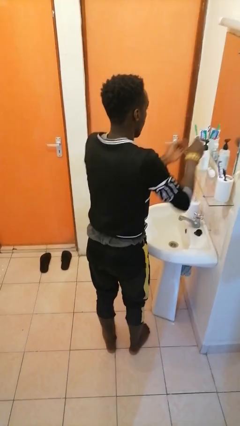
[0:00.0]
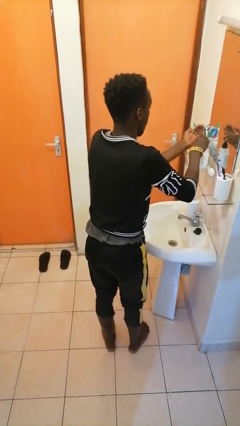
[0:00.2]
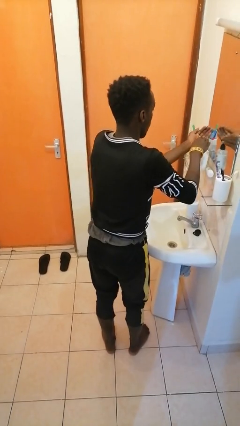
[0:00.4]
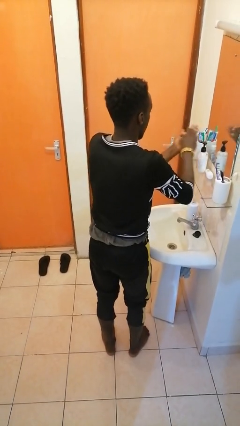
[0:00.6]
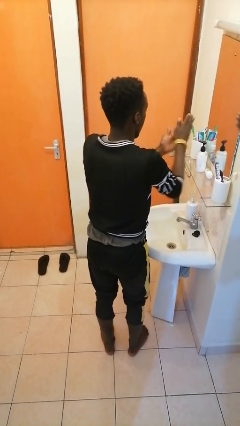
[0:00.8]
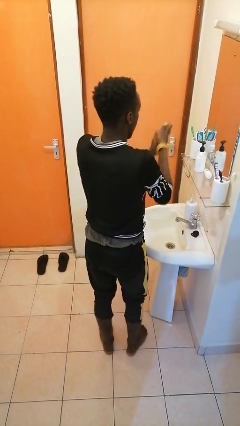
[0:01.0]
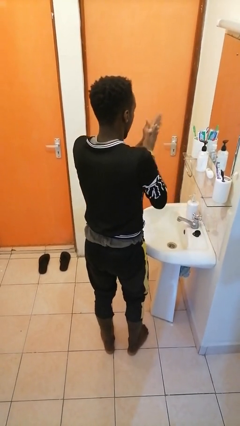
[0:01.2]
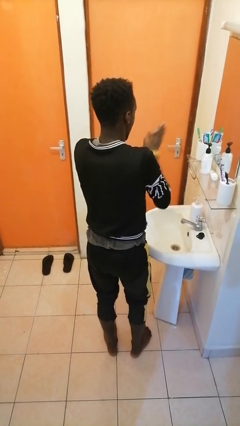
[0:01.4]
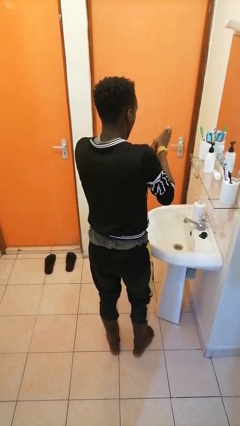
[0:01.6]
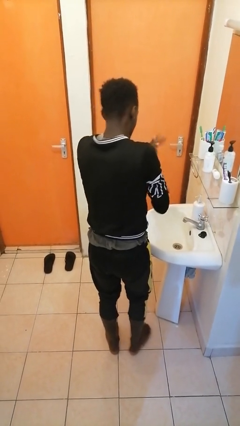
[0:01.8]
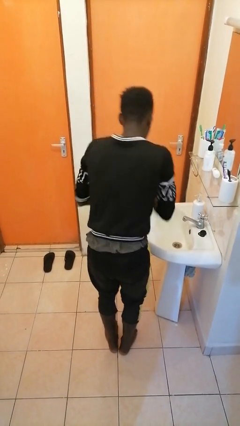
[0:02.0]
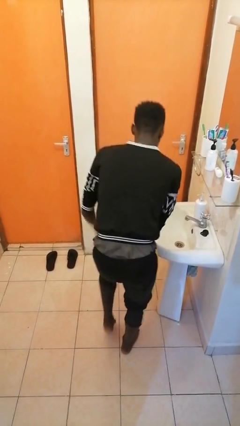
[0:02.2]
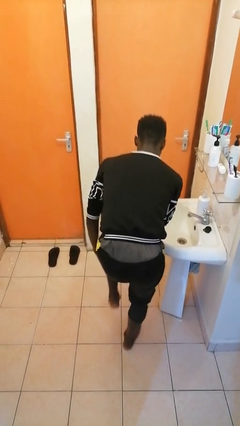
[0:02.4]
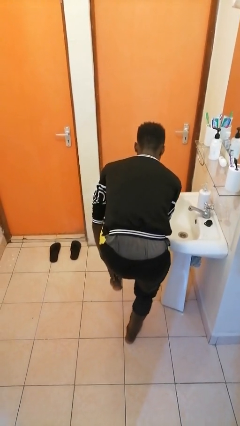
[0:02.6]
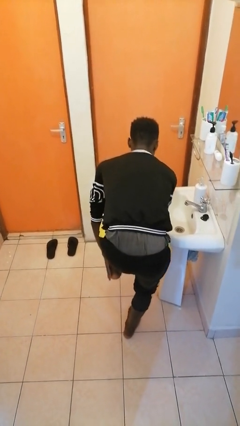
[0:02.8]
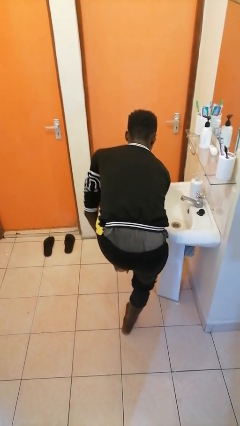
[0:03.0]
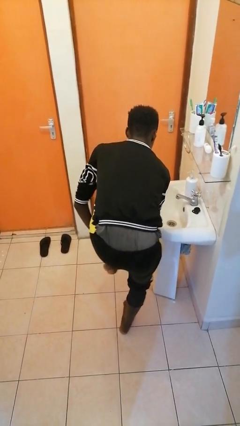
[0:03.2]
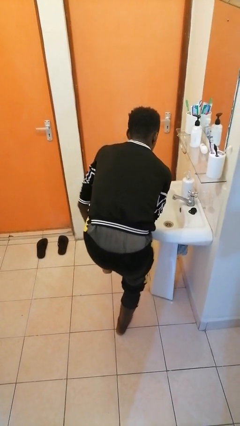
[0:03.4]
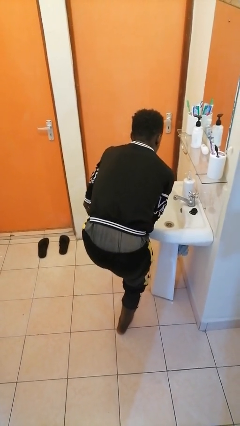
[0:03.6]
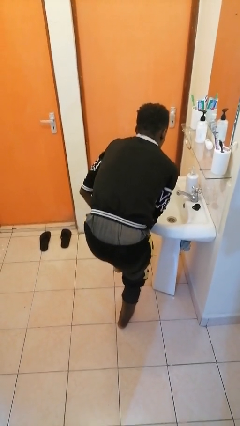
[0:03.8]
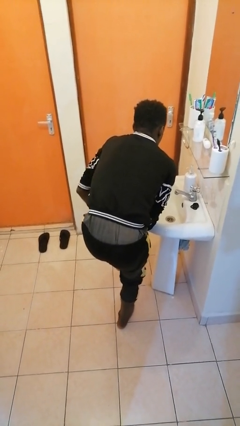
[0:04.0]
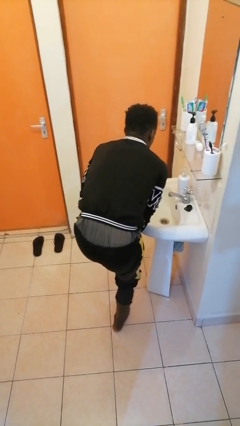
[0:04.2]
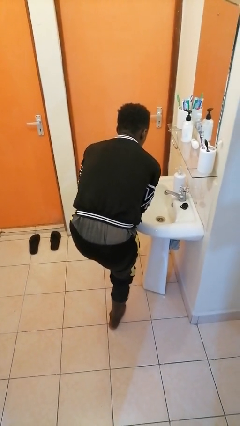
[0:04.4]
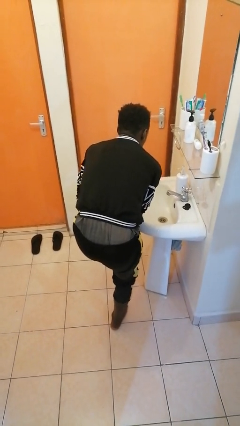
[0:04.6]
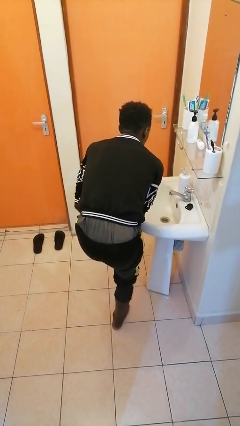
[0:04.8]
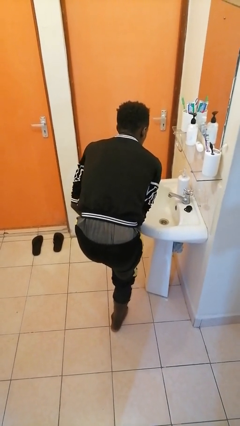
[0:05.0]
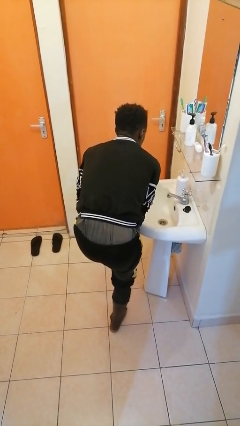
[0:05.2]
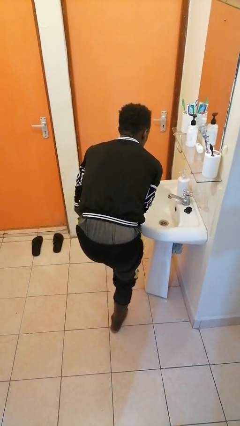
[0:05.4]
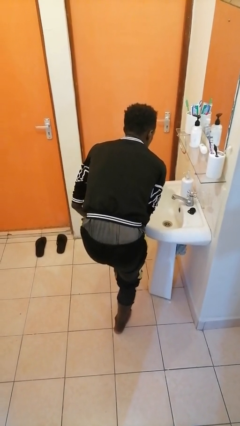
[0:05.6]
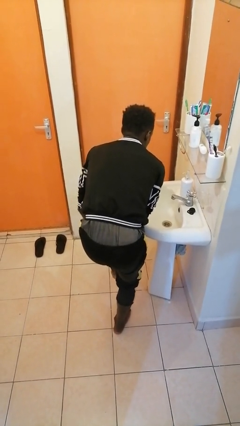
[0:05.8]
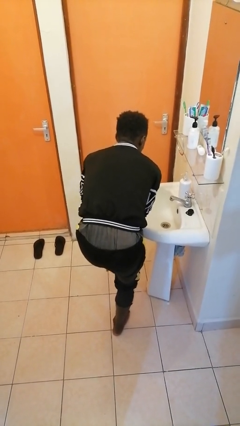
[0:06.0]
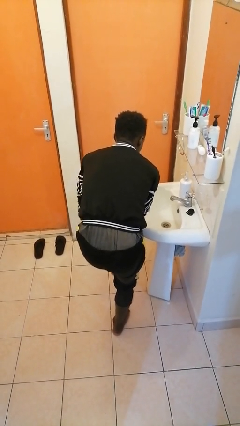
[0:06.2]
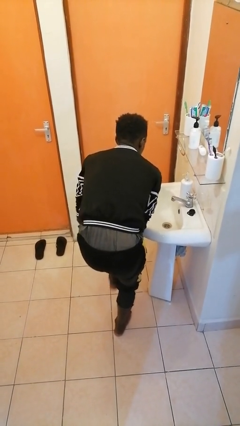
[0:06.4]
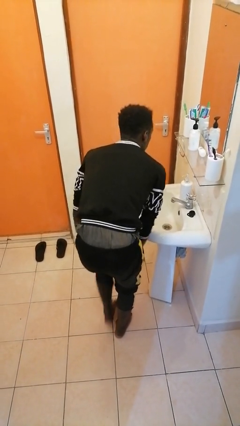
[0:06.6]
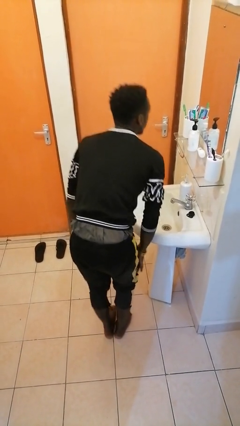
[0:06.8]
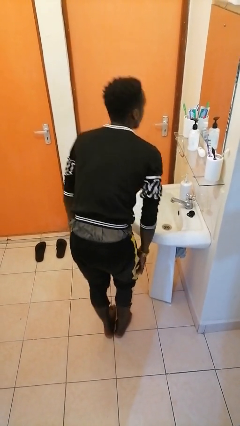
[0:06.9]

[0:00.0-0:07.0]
person applies facial moisturizer

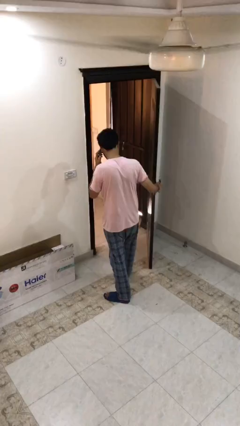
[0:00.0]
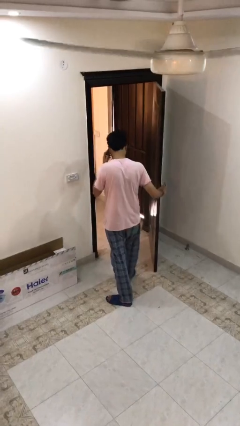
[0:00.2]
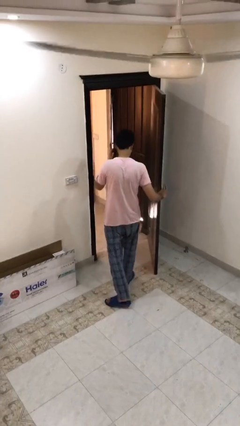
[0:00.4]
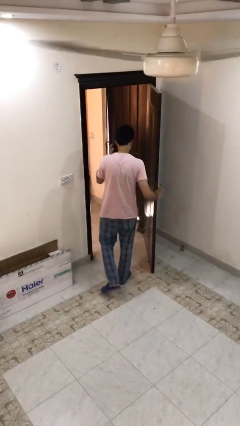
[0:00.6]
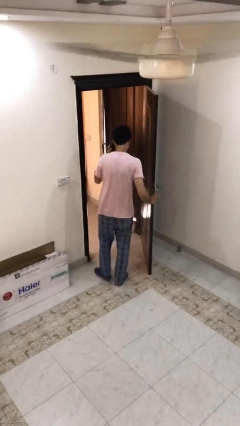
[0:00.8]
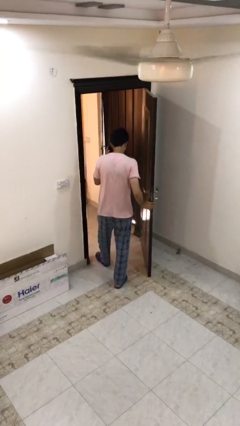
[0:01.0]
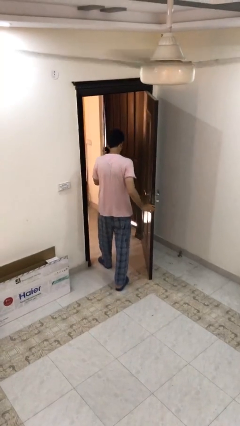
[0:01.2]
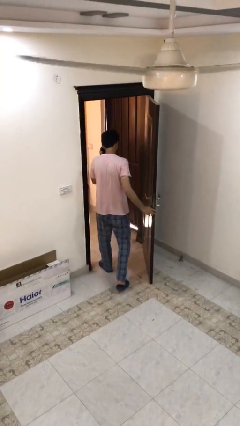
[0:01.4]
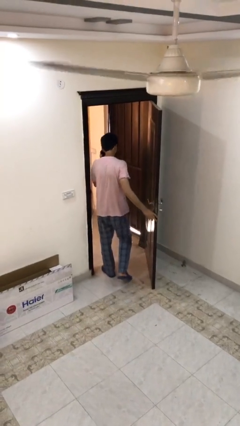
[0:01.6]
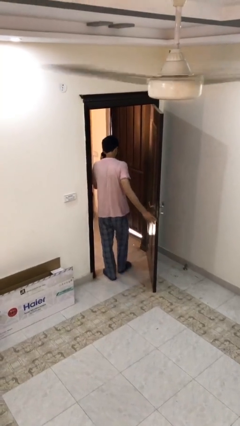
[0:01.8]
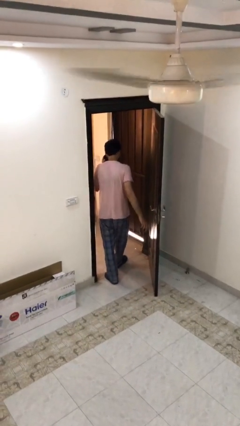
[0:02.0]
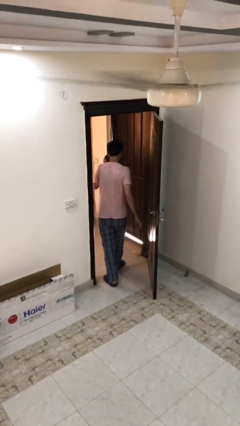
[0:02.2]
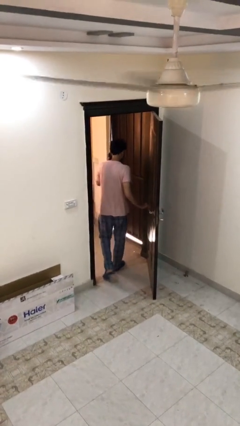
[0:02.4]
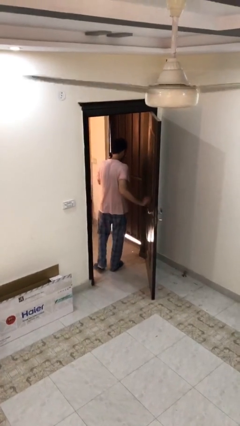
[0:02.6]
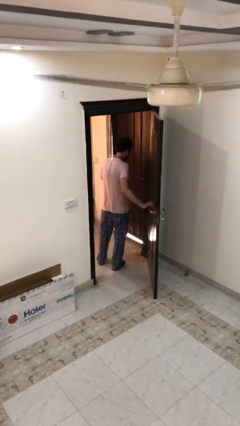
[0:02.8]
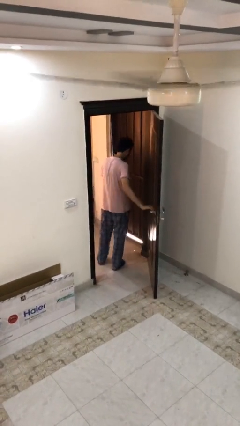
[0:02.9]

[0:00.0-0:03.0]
person exits scene through structure

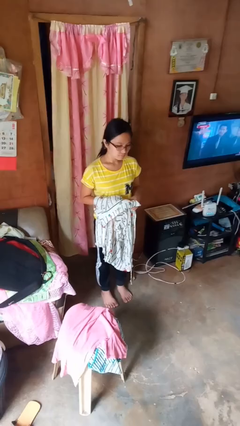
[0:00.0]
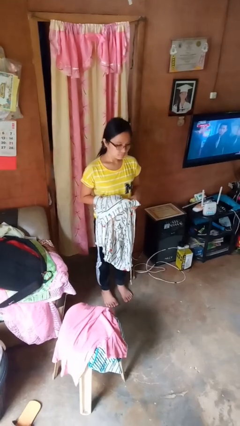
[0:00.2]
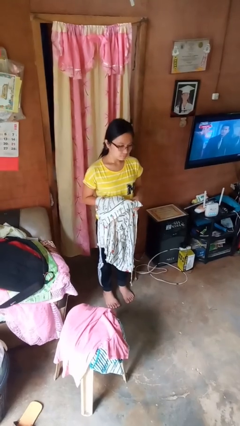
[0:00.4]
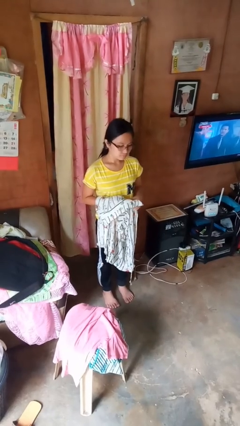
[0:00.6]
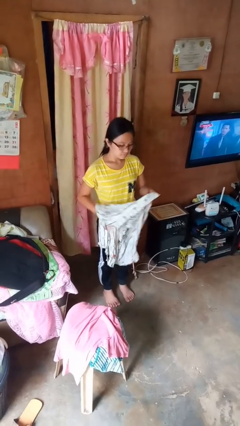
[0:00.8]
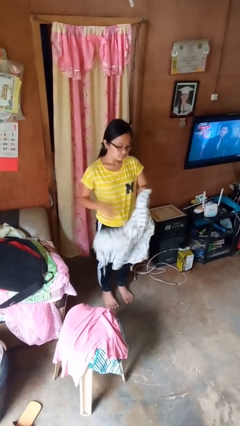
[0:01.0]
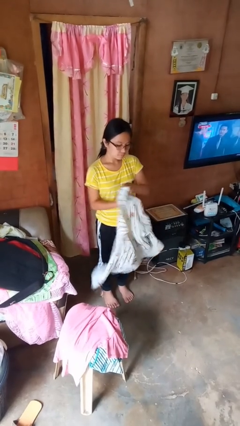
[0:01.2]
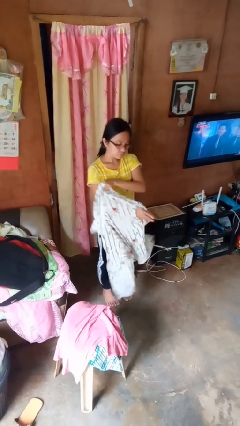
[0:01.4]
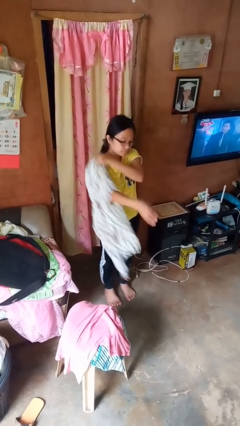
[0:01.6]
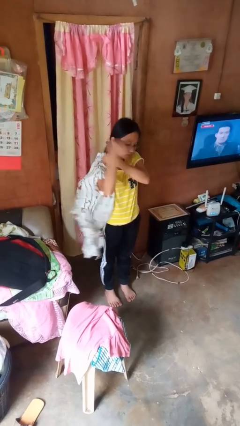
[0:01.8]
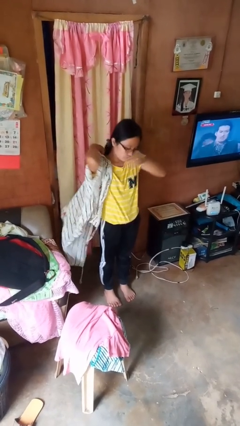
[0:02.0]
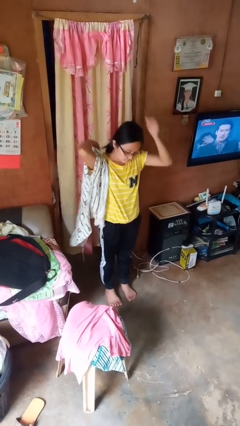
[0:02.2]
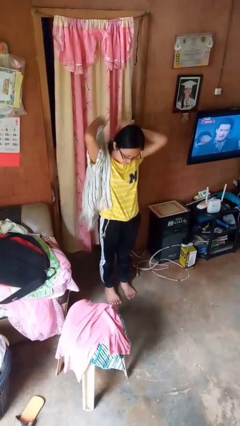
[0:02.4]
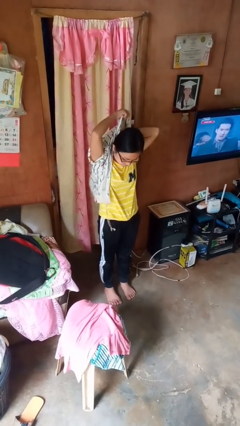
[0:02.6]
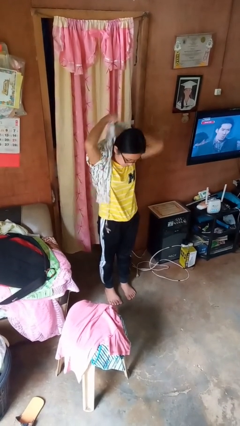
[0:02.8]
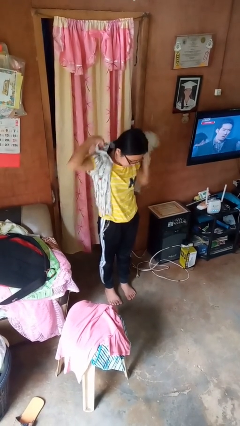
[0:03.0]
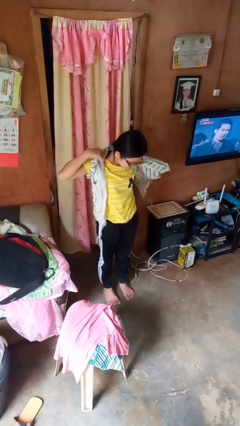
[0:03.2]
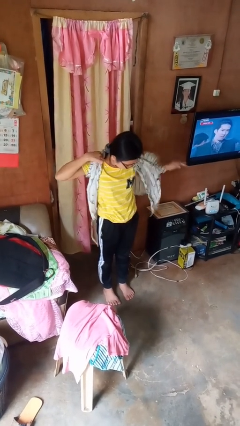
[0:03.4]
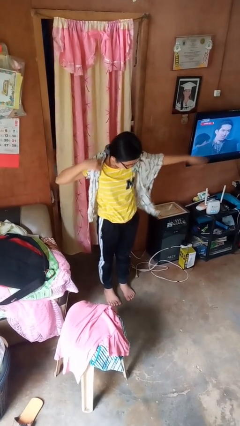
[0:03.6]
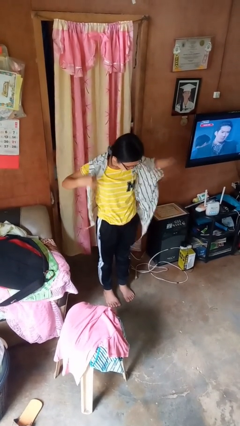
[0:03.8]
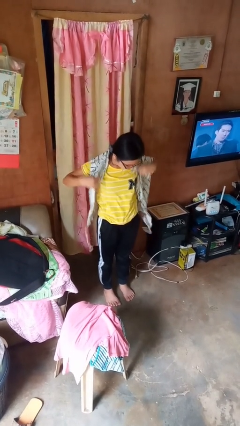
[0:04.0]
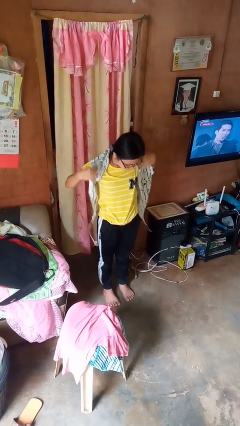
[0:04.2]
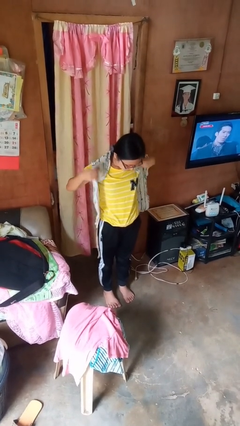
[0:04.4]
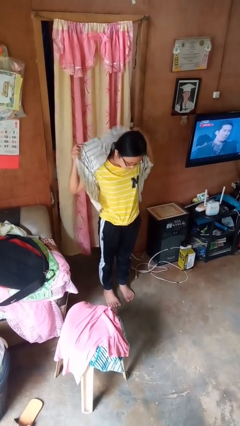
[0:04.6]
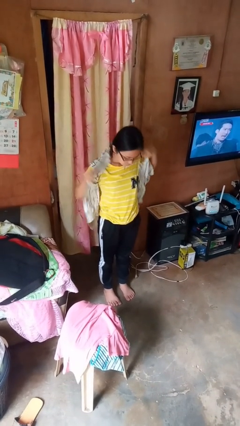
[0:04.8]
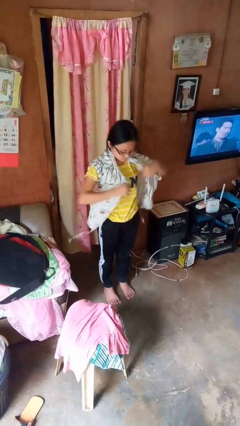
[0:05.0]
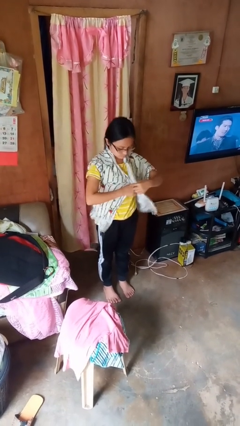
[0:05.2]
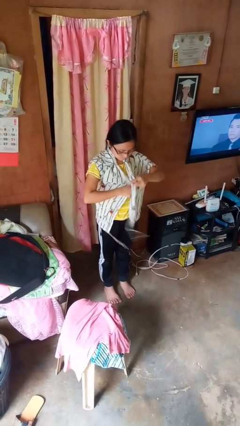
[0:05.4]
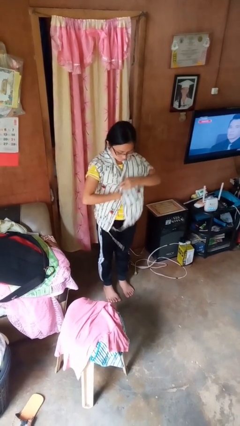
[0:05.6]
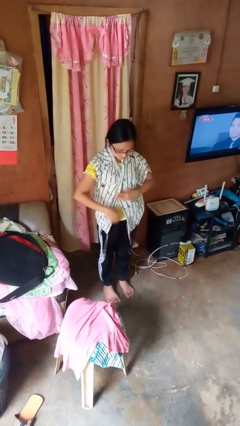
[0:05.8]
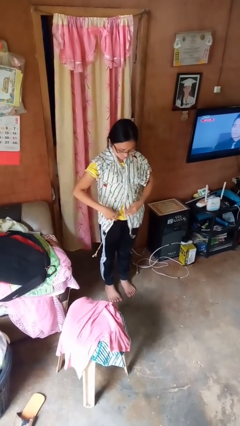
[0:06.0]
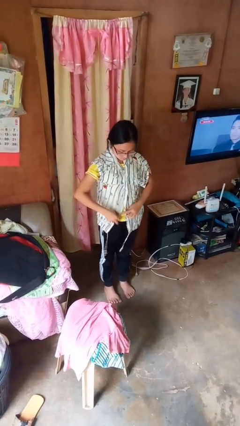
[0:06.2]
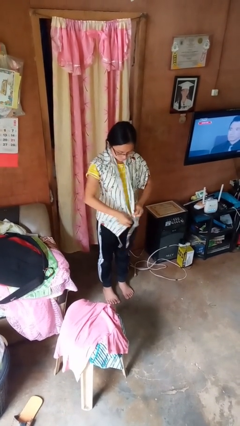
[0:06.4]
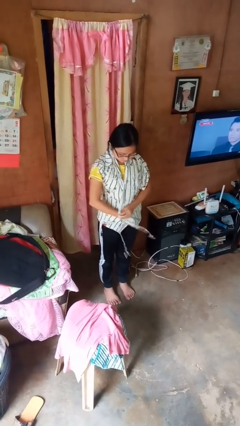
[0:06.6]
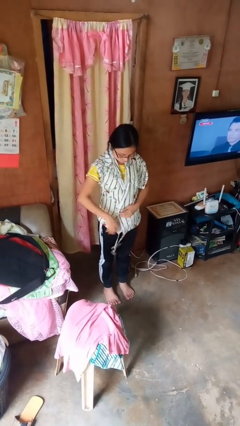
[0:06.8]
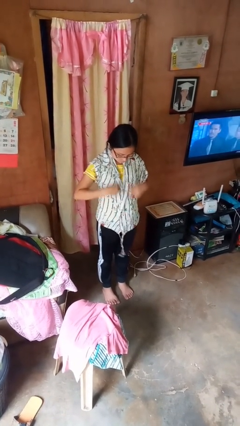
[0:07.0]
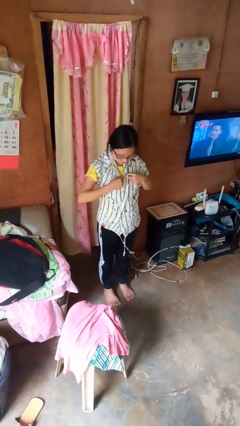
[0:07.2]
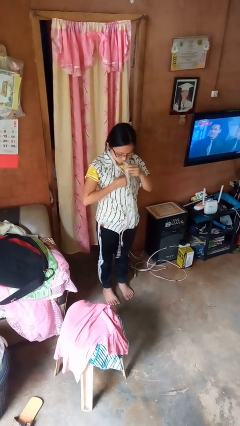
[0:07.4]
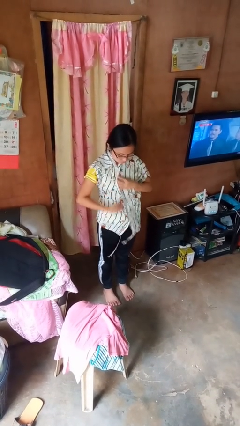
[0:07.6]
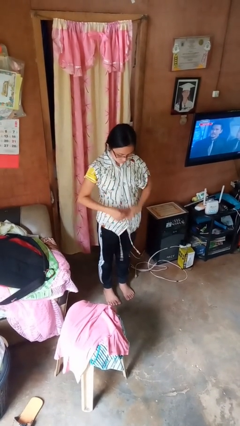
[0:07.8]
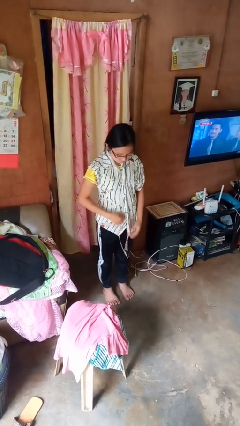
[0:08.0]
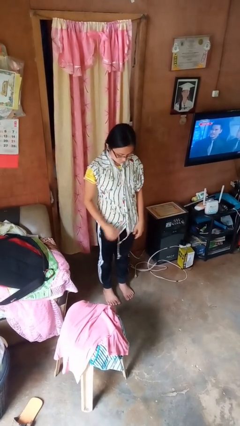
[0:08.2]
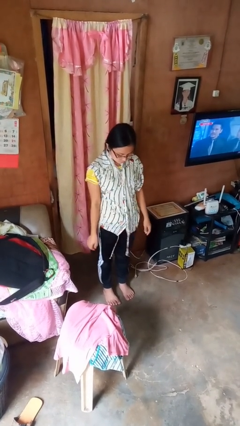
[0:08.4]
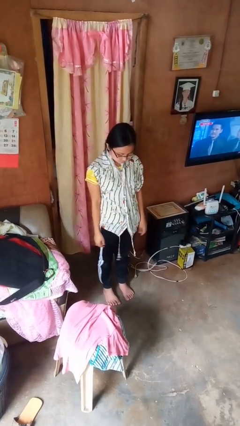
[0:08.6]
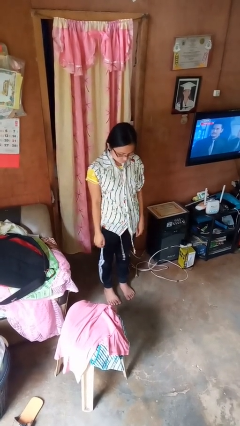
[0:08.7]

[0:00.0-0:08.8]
person puts on shirt
